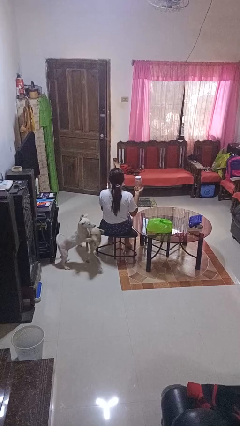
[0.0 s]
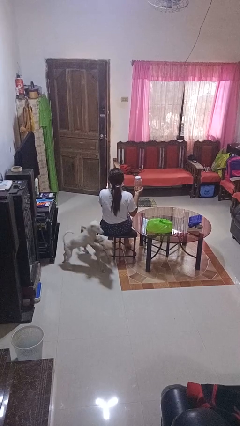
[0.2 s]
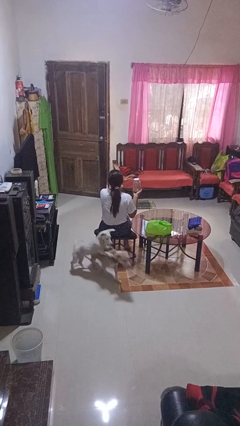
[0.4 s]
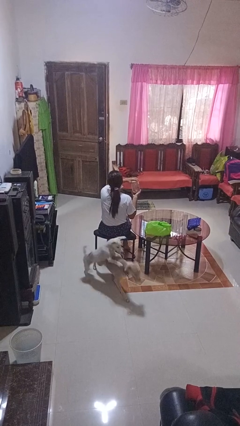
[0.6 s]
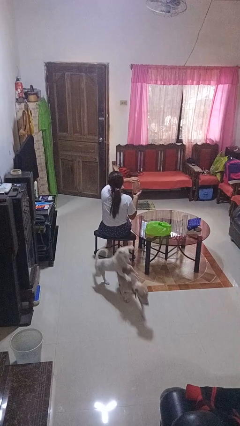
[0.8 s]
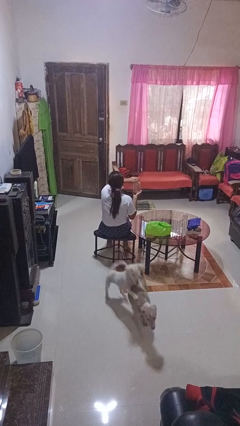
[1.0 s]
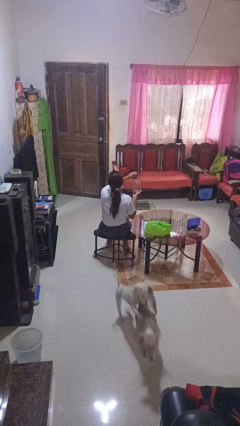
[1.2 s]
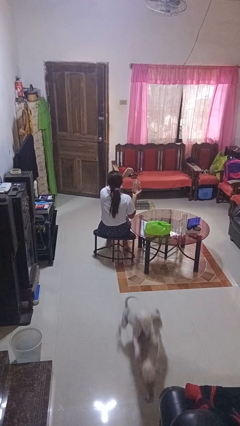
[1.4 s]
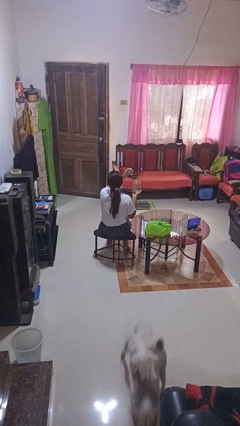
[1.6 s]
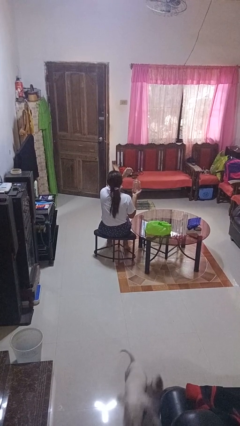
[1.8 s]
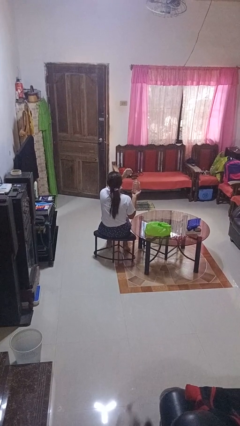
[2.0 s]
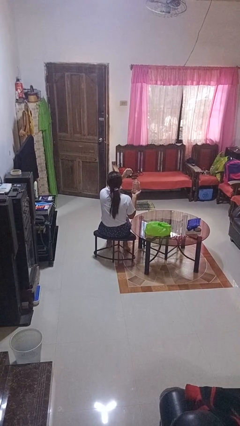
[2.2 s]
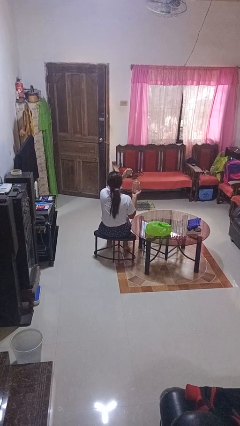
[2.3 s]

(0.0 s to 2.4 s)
person opens jar

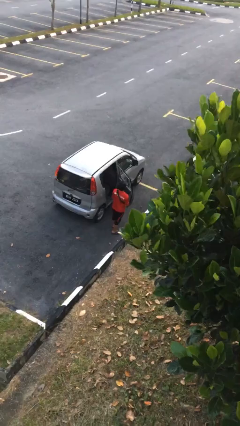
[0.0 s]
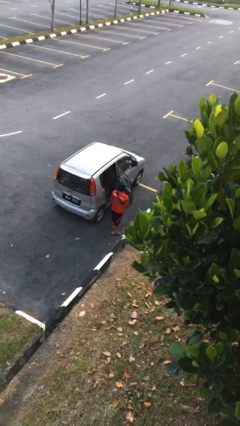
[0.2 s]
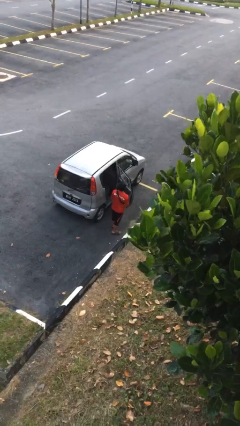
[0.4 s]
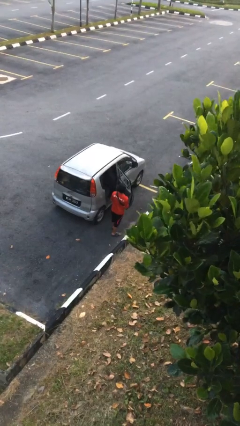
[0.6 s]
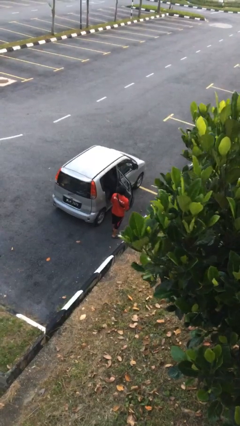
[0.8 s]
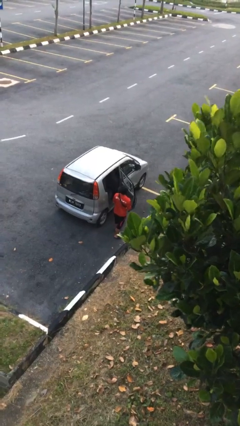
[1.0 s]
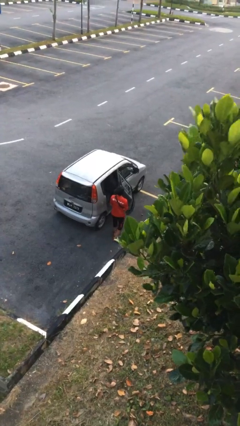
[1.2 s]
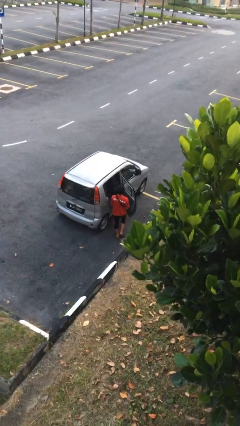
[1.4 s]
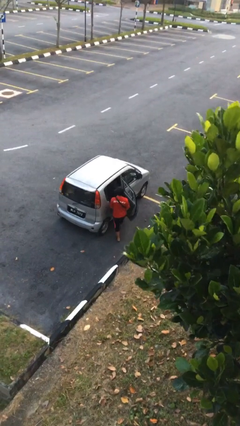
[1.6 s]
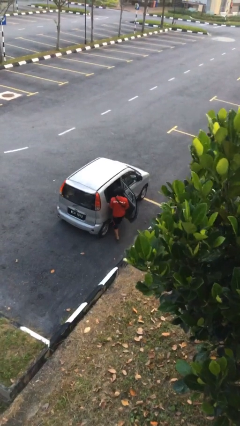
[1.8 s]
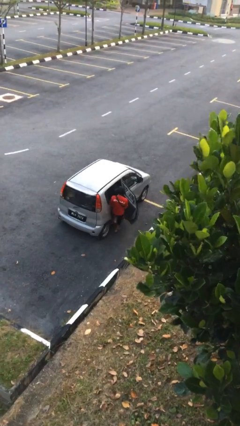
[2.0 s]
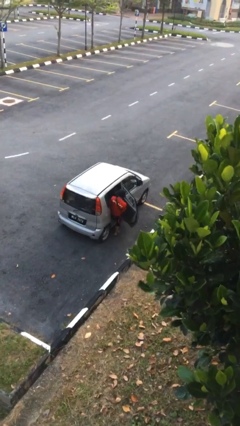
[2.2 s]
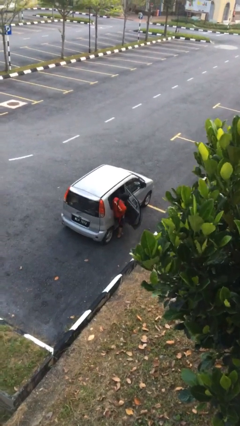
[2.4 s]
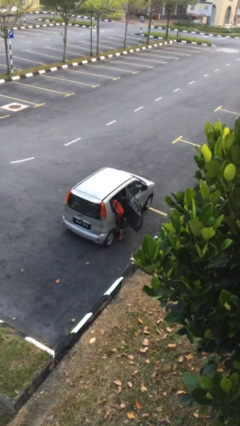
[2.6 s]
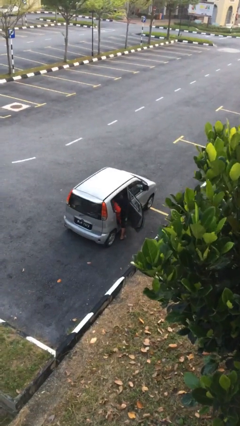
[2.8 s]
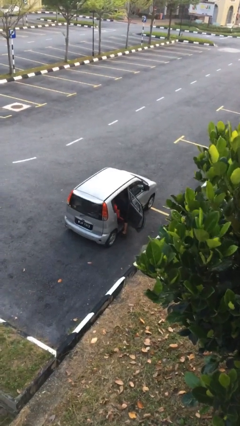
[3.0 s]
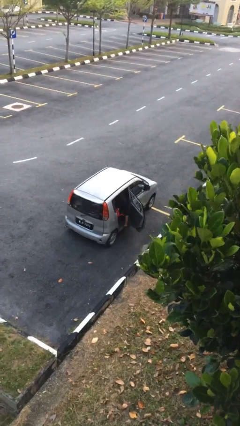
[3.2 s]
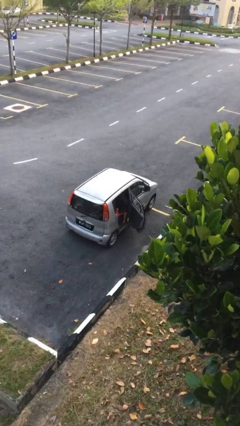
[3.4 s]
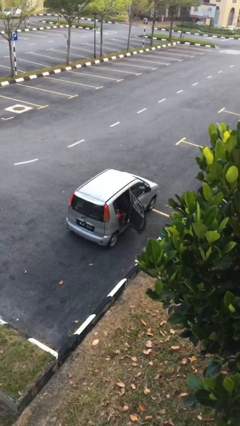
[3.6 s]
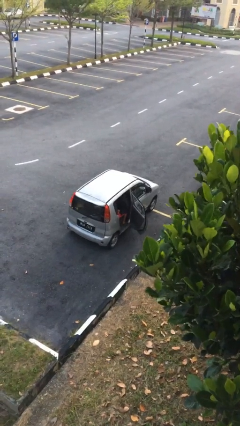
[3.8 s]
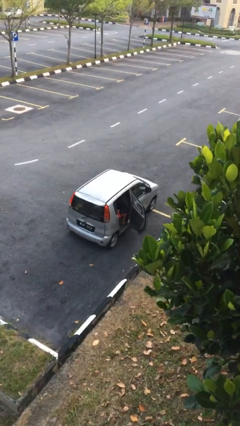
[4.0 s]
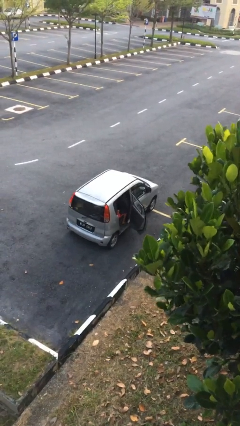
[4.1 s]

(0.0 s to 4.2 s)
person enters car

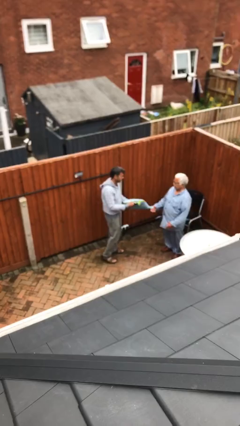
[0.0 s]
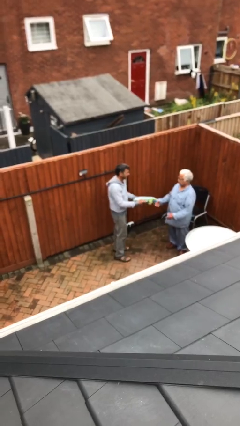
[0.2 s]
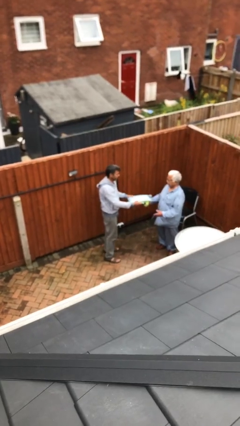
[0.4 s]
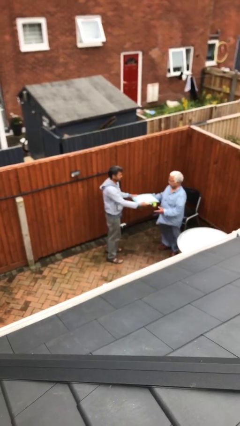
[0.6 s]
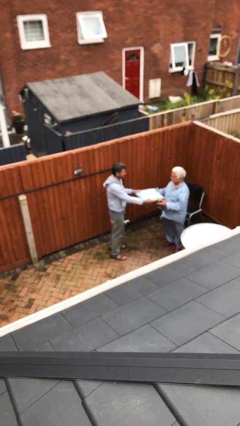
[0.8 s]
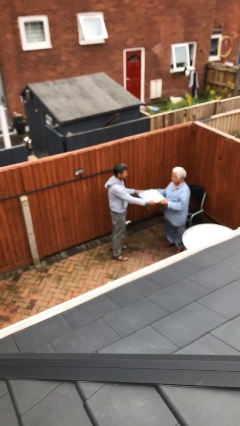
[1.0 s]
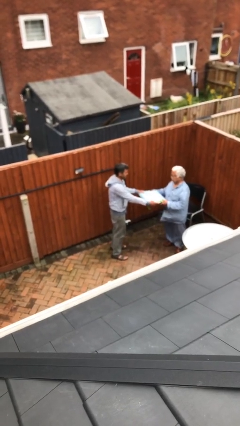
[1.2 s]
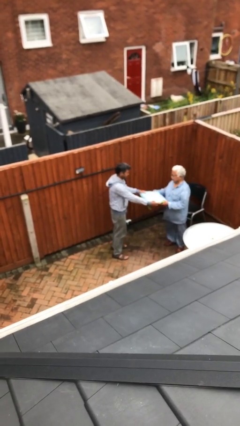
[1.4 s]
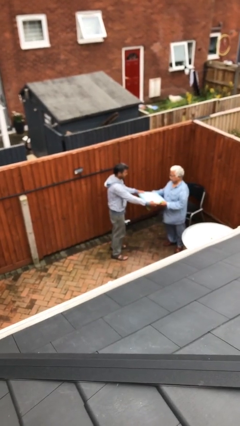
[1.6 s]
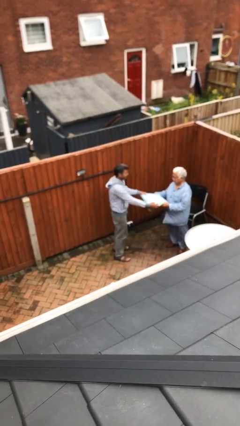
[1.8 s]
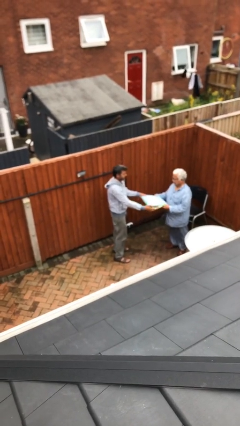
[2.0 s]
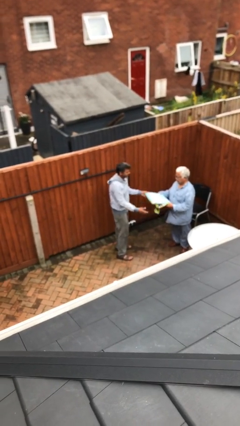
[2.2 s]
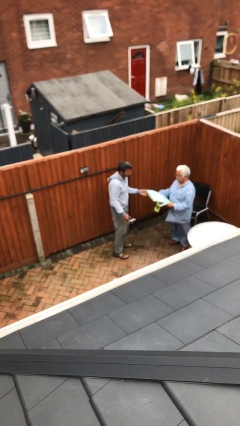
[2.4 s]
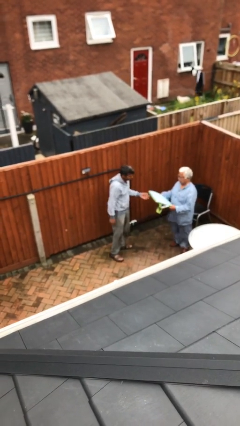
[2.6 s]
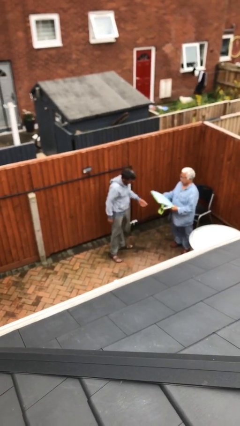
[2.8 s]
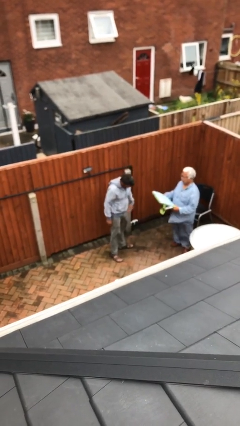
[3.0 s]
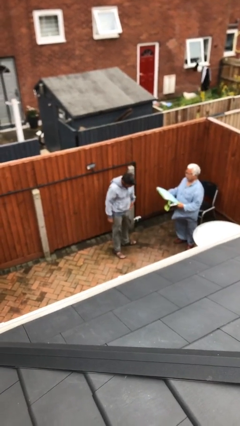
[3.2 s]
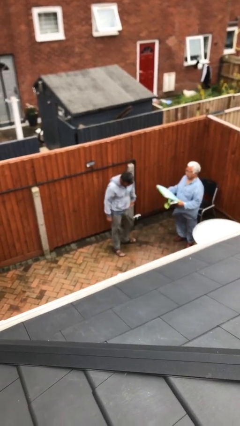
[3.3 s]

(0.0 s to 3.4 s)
person transfers object to person

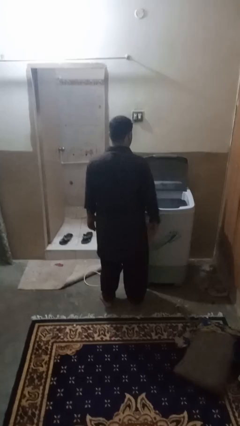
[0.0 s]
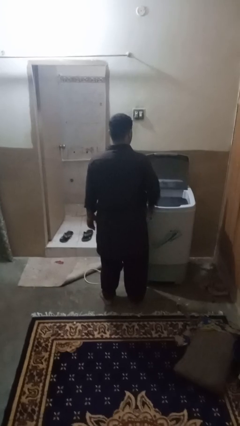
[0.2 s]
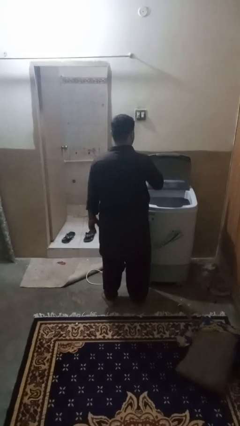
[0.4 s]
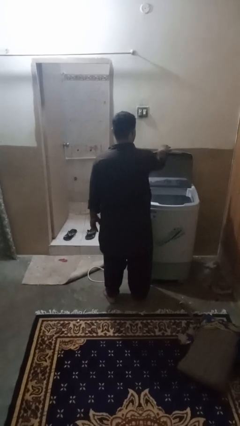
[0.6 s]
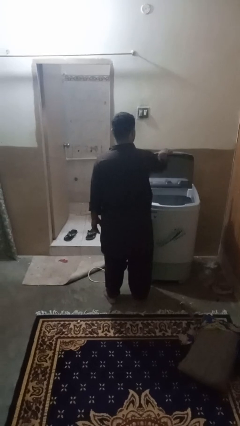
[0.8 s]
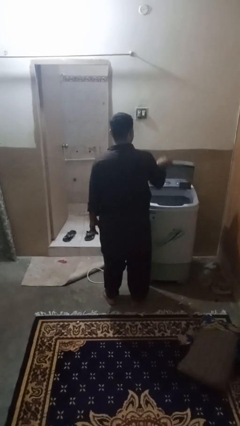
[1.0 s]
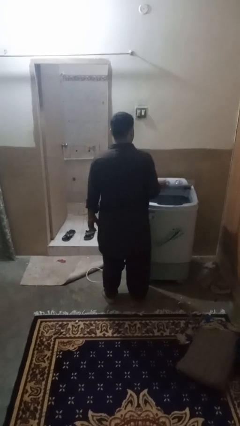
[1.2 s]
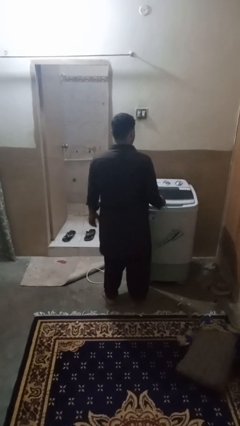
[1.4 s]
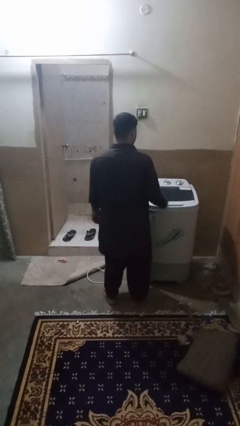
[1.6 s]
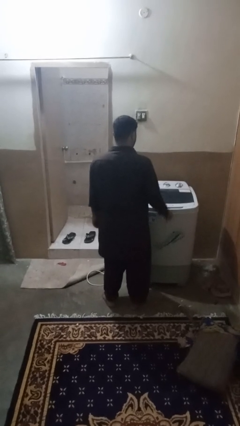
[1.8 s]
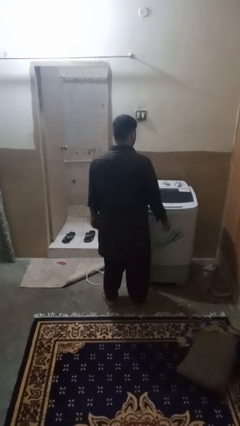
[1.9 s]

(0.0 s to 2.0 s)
person closes clothes washer

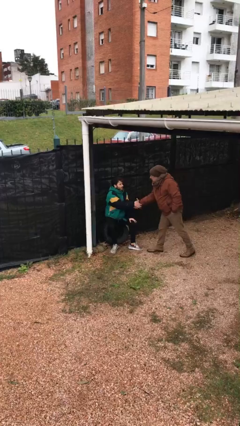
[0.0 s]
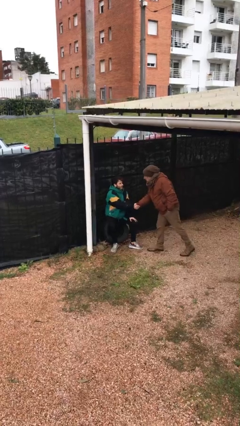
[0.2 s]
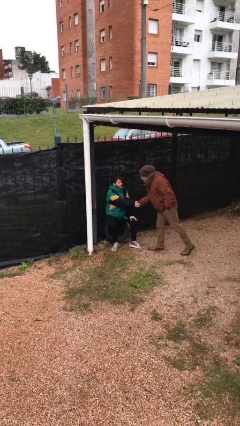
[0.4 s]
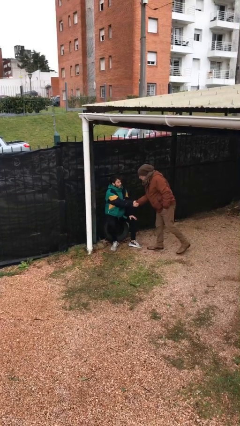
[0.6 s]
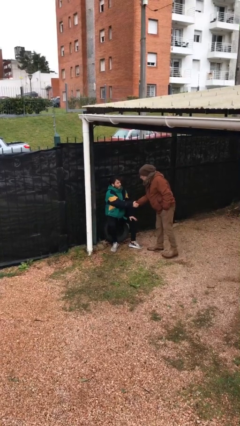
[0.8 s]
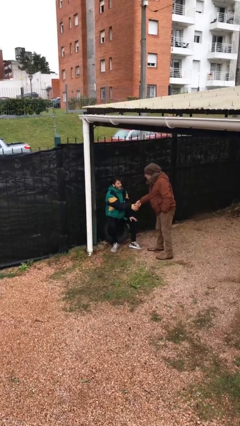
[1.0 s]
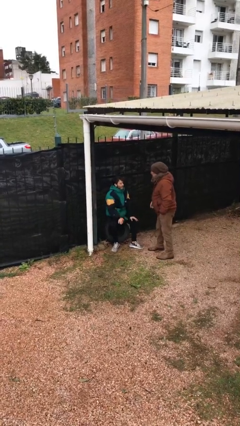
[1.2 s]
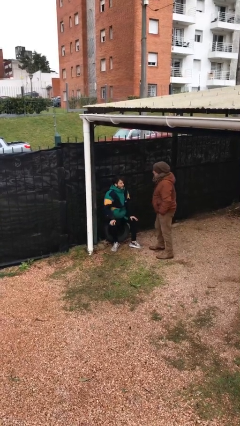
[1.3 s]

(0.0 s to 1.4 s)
person shakes hand

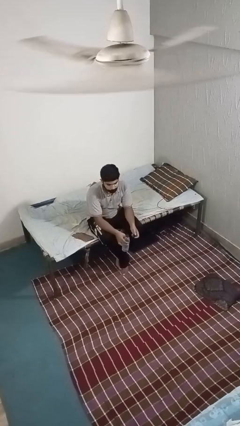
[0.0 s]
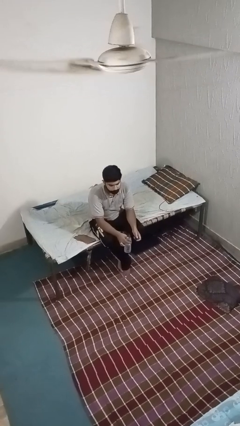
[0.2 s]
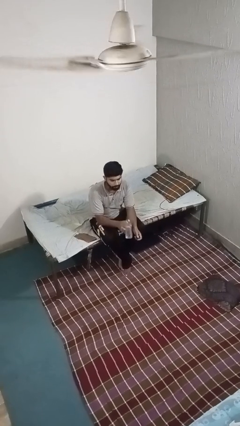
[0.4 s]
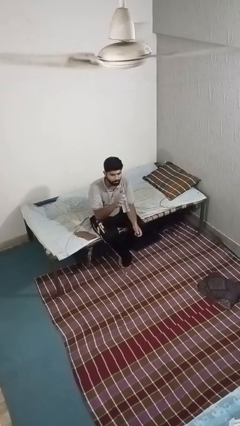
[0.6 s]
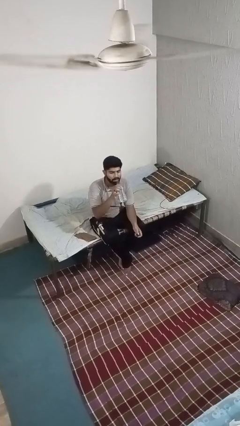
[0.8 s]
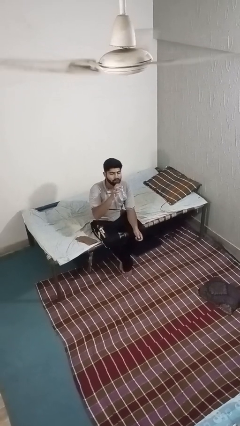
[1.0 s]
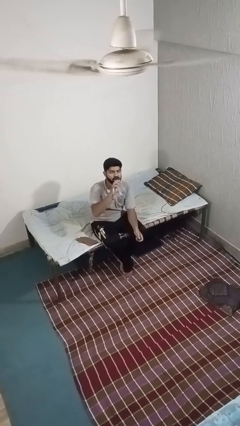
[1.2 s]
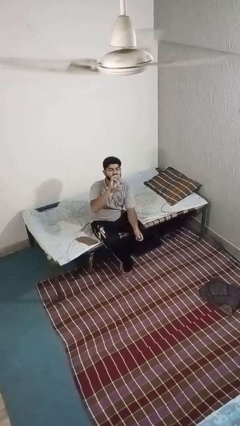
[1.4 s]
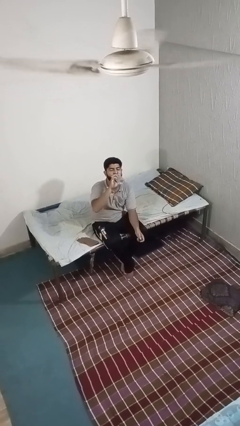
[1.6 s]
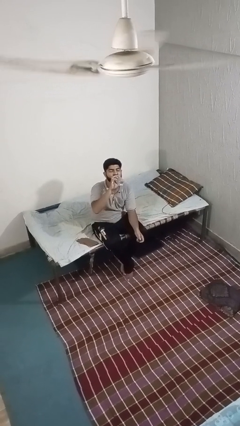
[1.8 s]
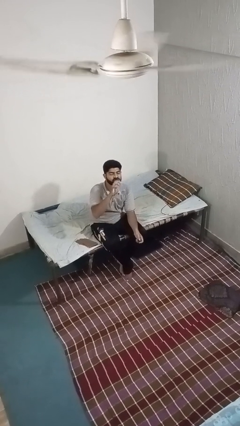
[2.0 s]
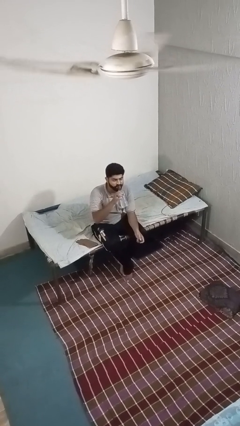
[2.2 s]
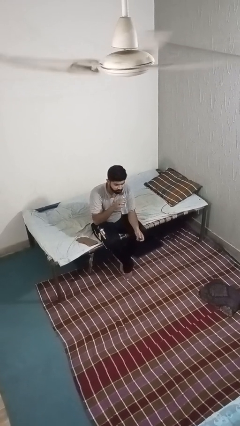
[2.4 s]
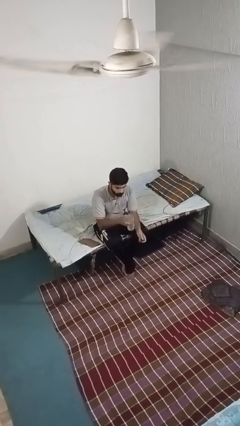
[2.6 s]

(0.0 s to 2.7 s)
person drinks from bottle

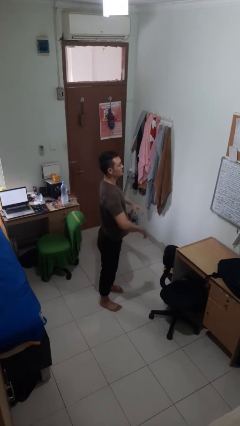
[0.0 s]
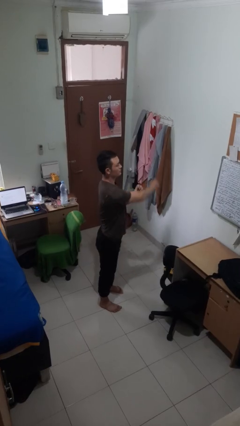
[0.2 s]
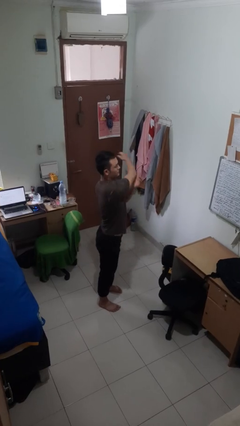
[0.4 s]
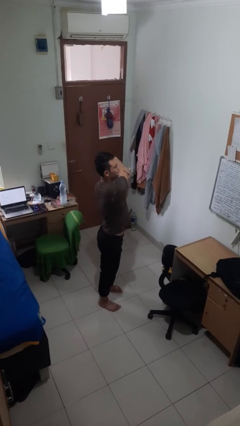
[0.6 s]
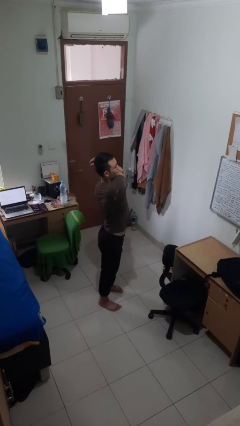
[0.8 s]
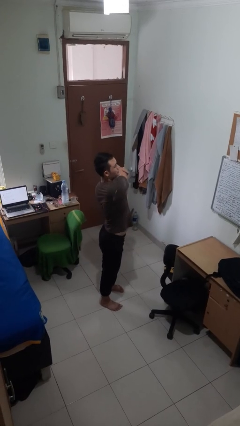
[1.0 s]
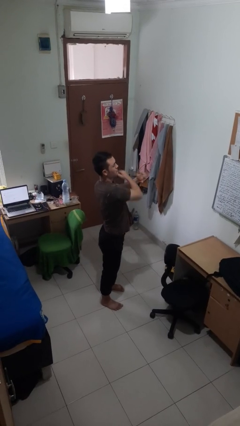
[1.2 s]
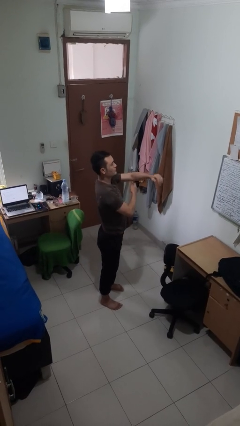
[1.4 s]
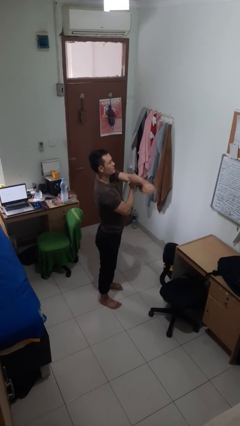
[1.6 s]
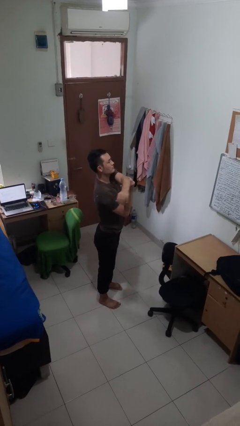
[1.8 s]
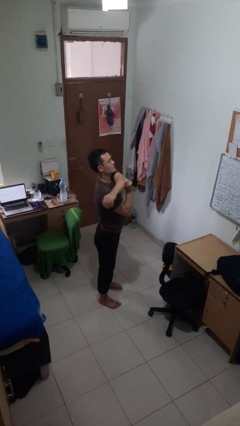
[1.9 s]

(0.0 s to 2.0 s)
person stretches arms to side
